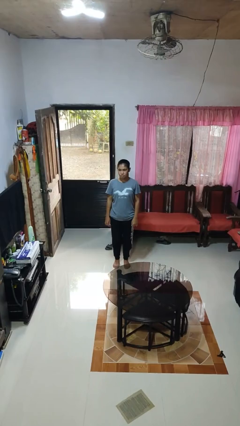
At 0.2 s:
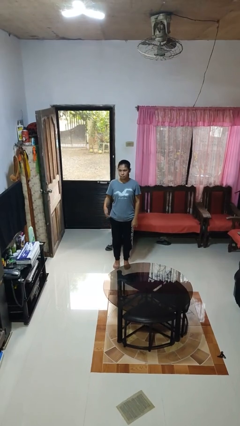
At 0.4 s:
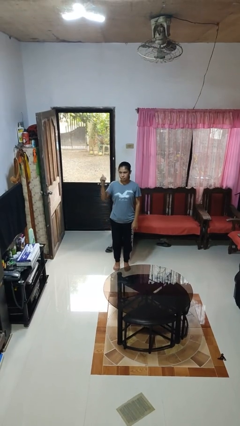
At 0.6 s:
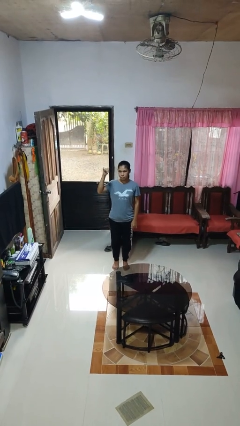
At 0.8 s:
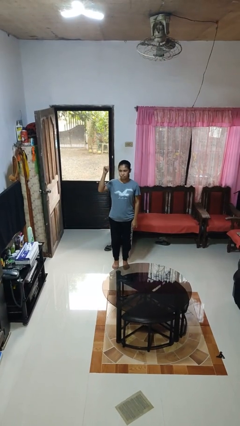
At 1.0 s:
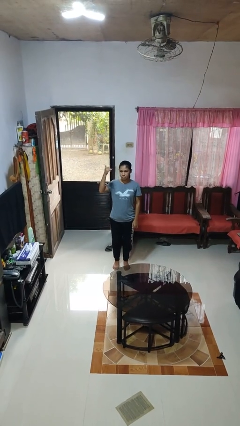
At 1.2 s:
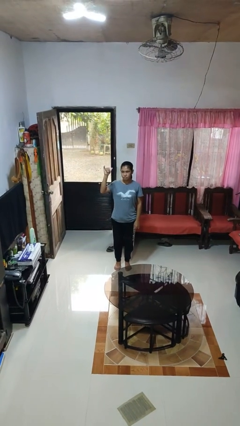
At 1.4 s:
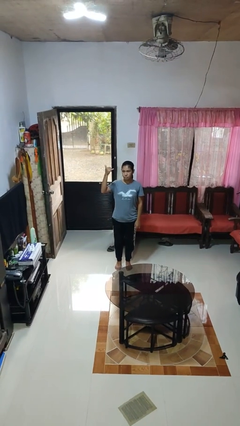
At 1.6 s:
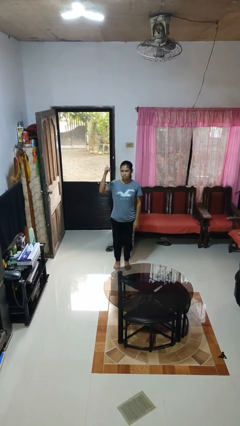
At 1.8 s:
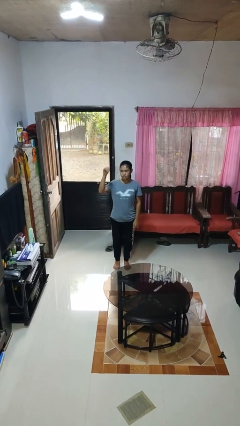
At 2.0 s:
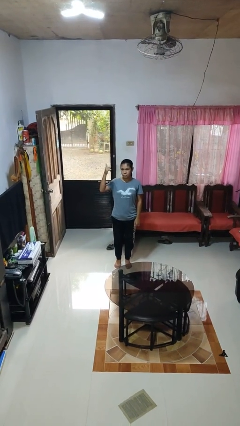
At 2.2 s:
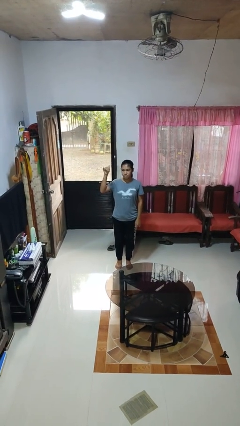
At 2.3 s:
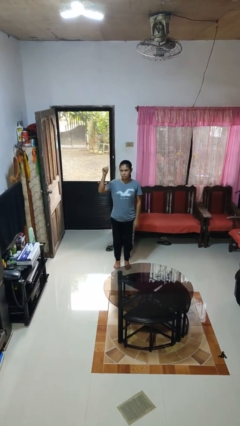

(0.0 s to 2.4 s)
person gestures hang loose

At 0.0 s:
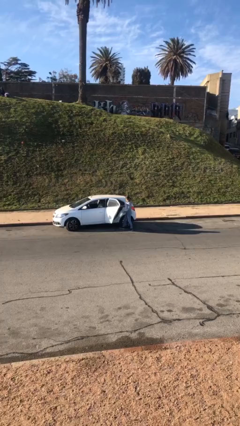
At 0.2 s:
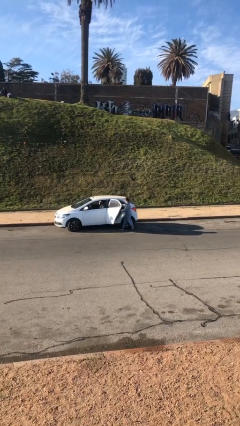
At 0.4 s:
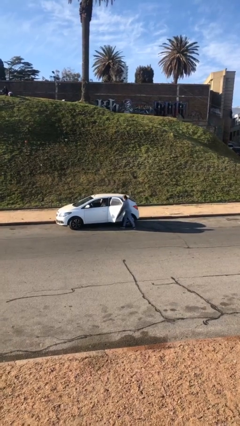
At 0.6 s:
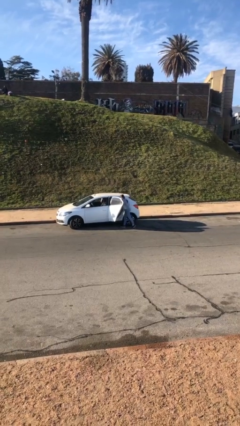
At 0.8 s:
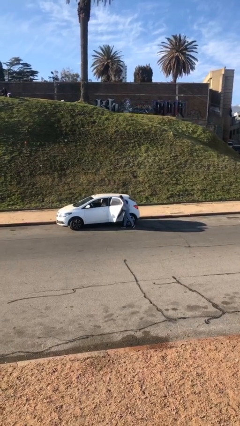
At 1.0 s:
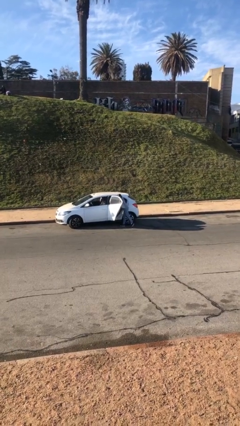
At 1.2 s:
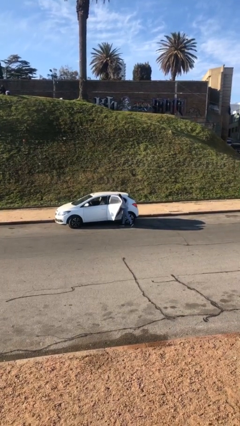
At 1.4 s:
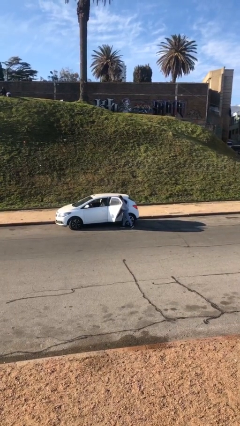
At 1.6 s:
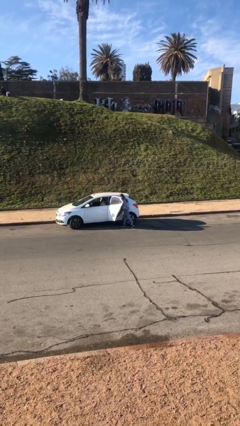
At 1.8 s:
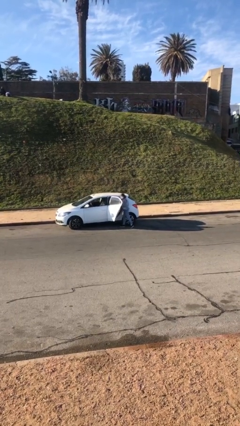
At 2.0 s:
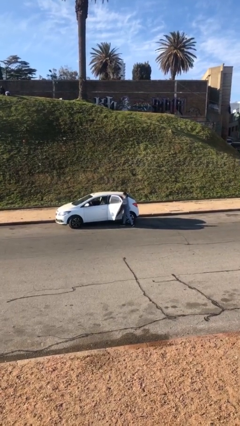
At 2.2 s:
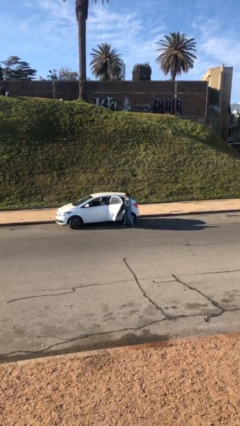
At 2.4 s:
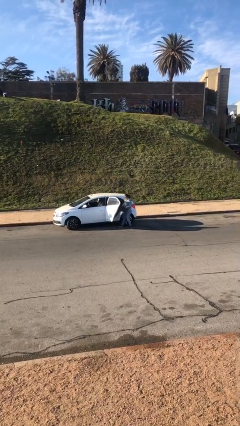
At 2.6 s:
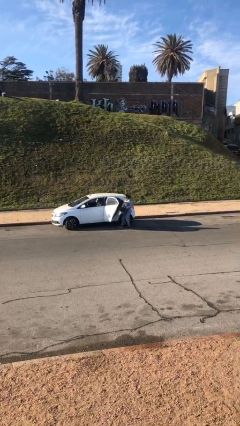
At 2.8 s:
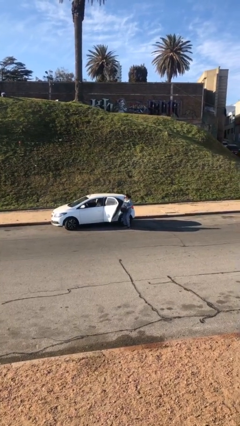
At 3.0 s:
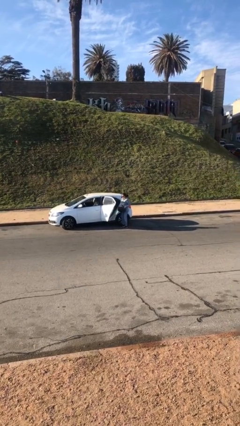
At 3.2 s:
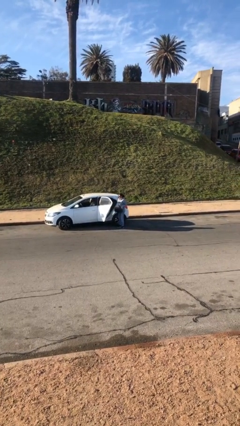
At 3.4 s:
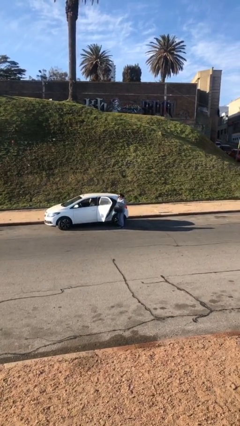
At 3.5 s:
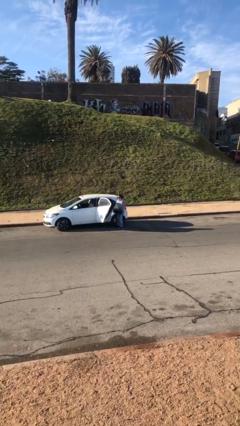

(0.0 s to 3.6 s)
person unloads car

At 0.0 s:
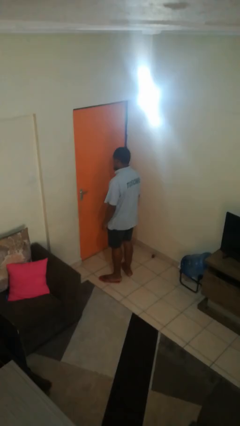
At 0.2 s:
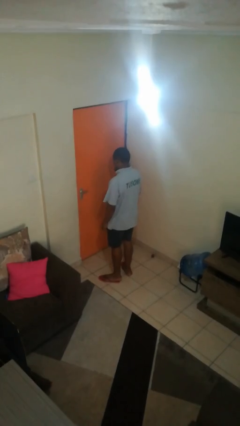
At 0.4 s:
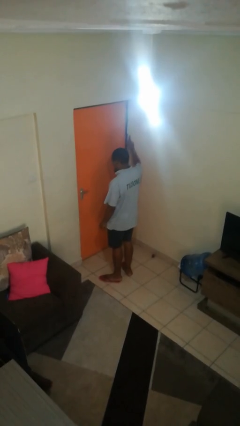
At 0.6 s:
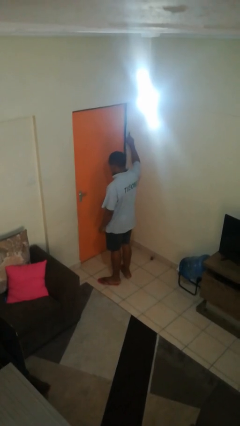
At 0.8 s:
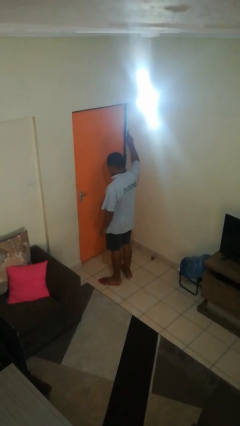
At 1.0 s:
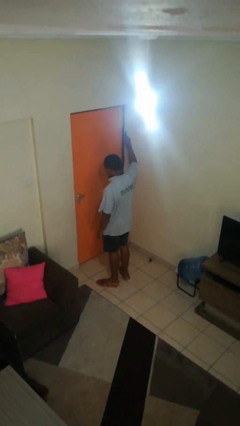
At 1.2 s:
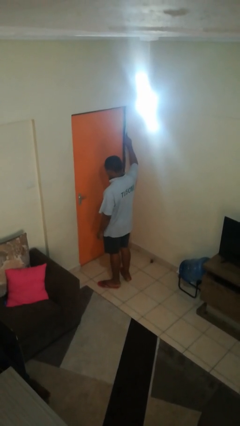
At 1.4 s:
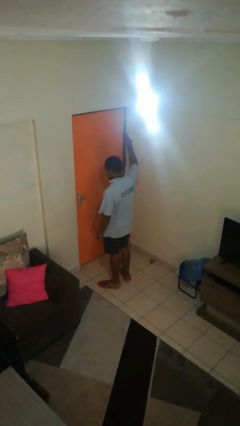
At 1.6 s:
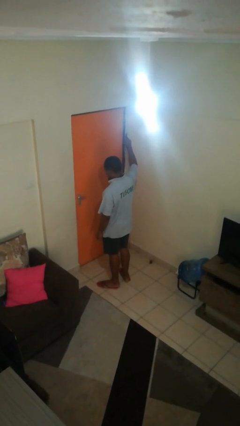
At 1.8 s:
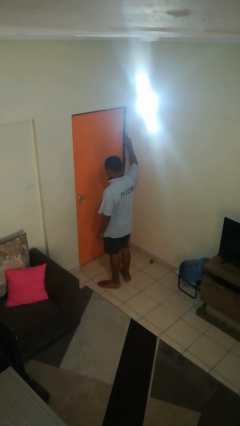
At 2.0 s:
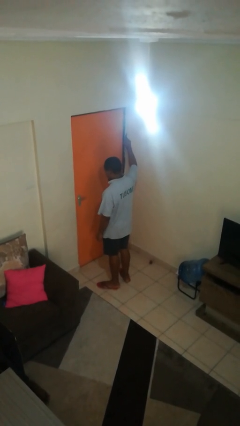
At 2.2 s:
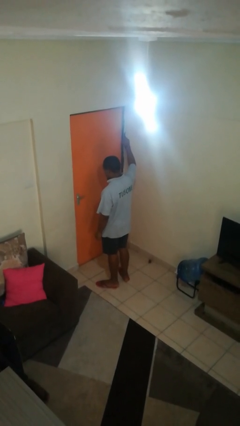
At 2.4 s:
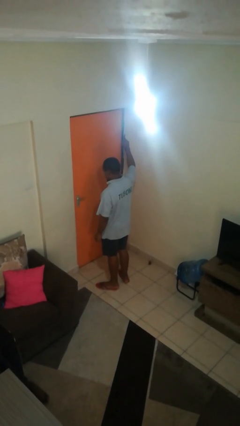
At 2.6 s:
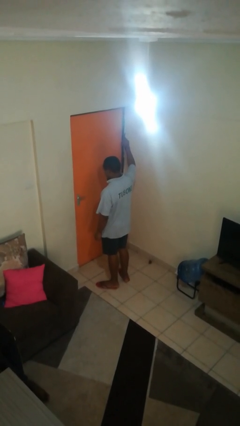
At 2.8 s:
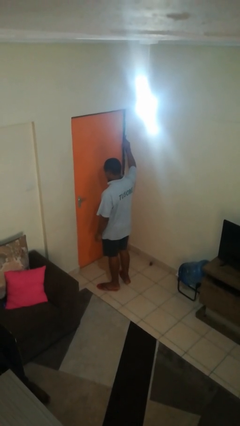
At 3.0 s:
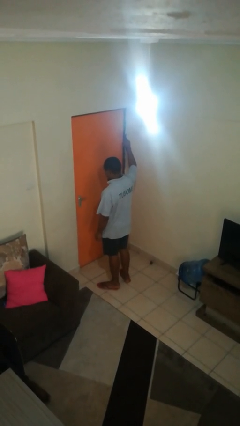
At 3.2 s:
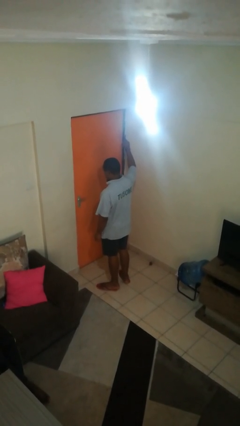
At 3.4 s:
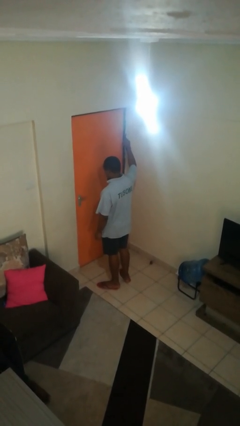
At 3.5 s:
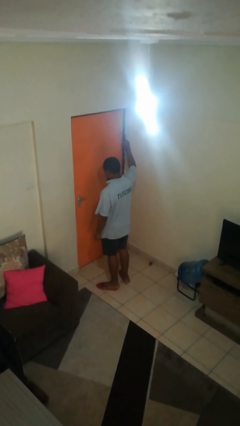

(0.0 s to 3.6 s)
person gestures number one

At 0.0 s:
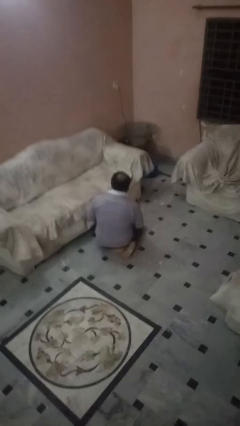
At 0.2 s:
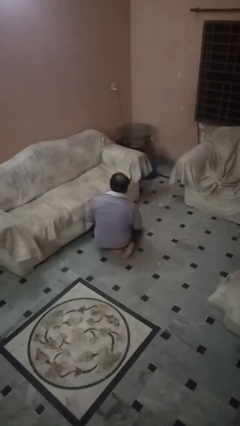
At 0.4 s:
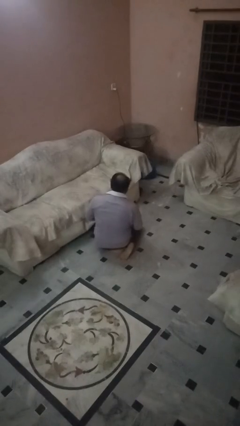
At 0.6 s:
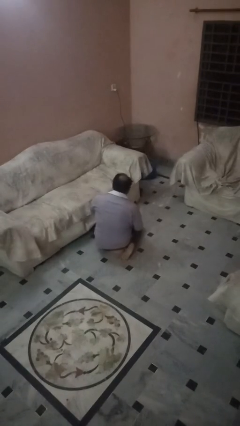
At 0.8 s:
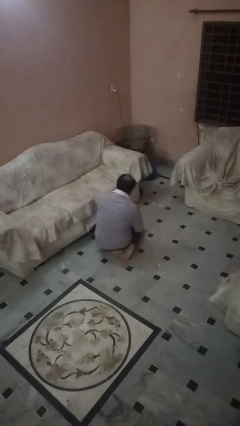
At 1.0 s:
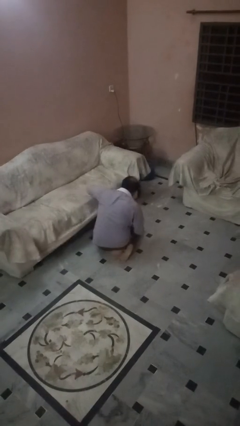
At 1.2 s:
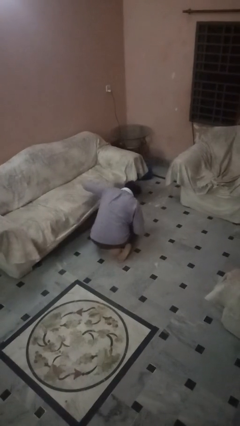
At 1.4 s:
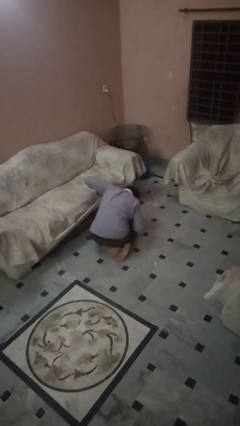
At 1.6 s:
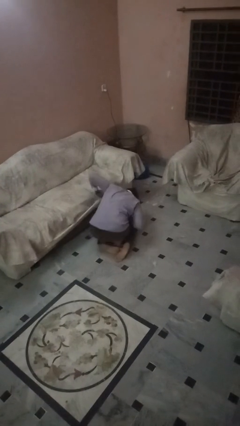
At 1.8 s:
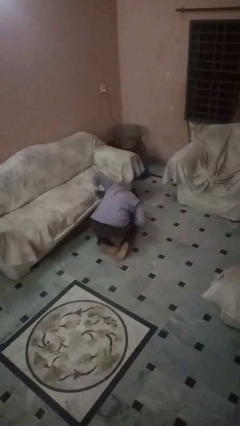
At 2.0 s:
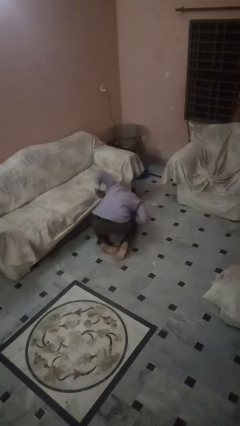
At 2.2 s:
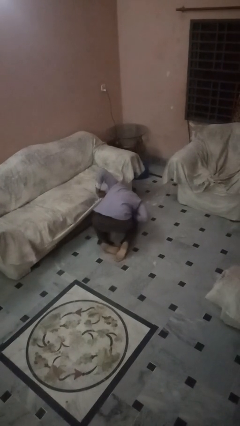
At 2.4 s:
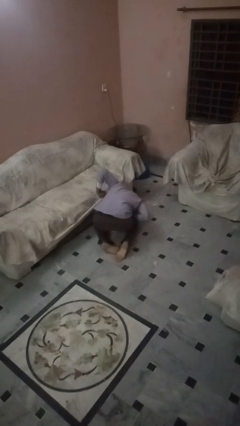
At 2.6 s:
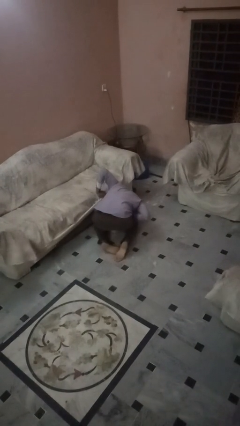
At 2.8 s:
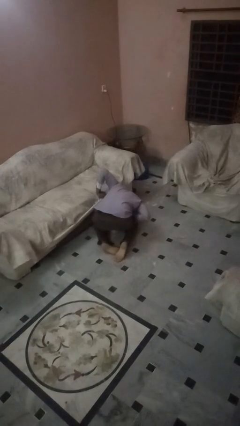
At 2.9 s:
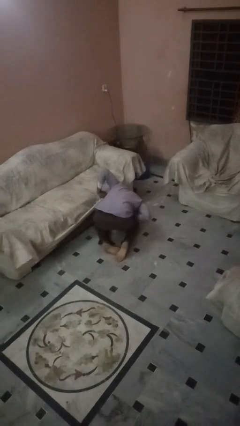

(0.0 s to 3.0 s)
person searches under couch

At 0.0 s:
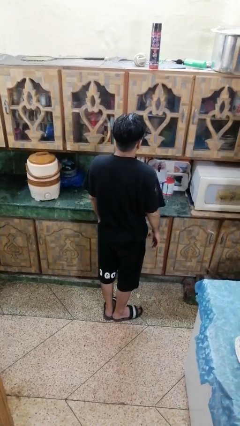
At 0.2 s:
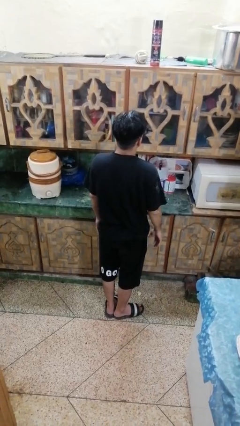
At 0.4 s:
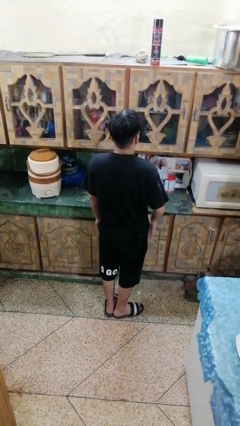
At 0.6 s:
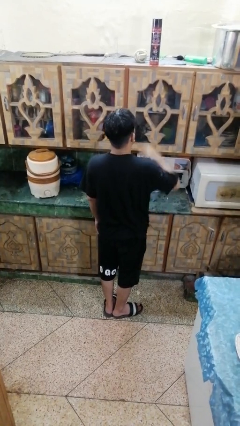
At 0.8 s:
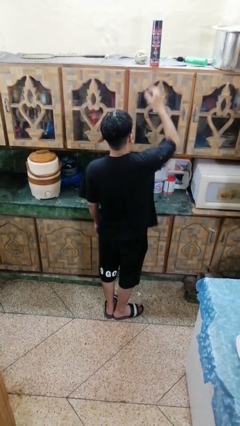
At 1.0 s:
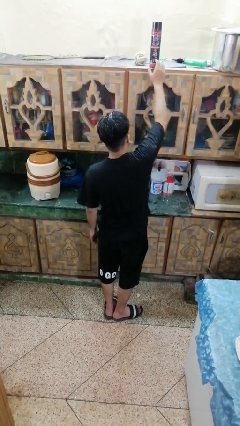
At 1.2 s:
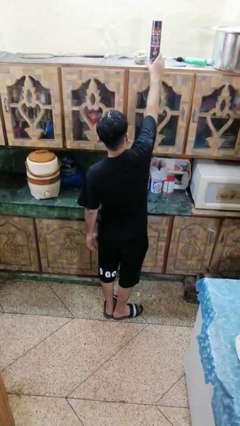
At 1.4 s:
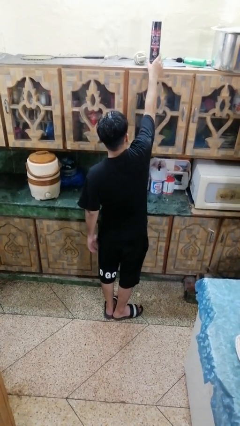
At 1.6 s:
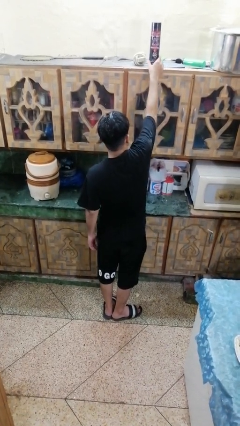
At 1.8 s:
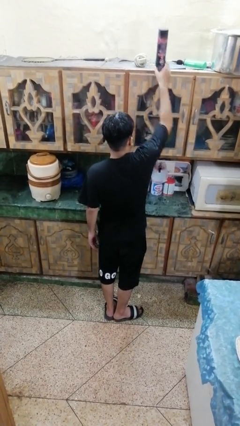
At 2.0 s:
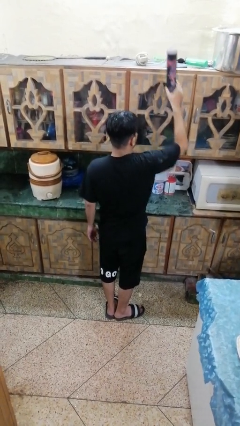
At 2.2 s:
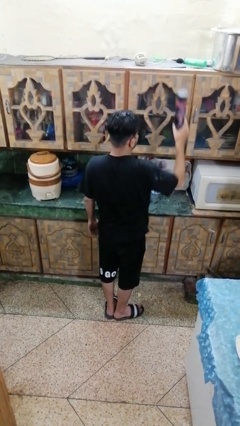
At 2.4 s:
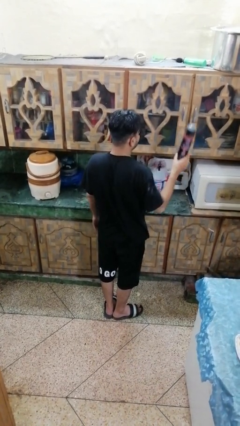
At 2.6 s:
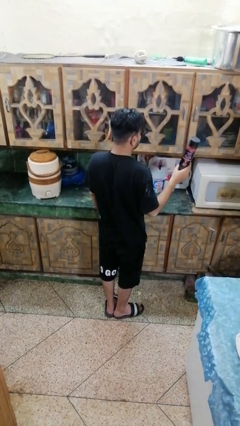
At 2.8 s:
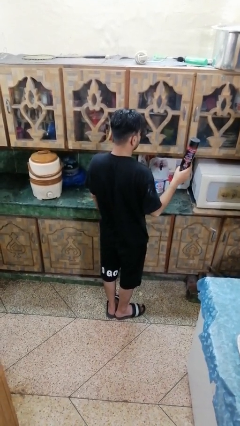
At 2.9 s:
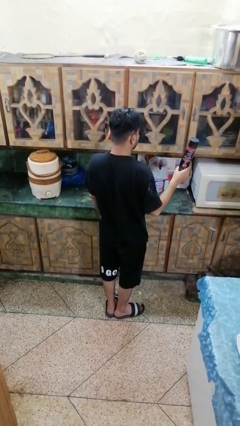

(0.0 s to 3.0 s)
person picks up object from countertop

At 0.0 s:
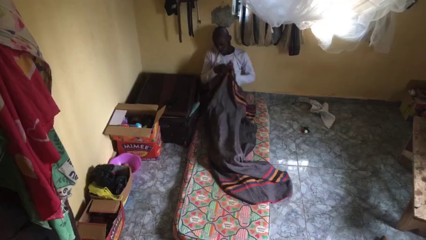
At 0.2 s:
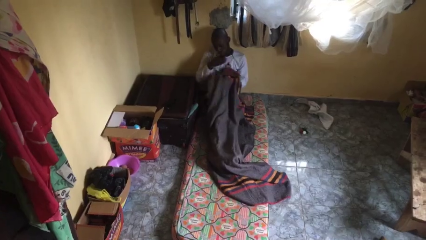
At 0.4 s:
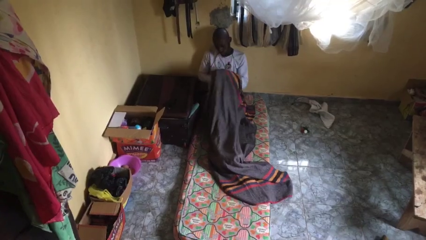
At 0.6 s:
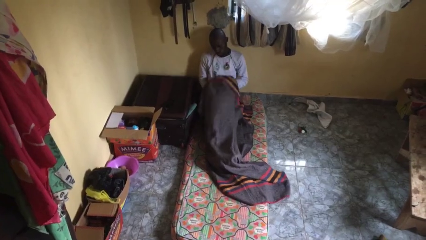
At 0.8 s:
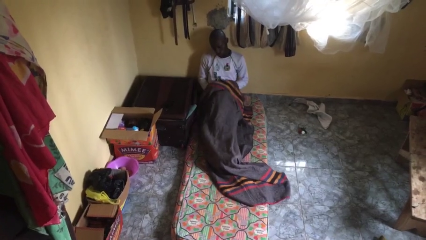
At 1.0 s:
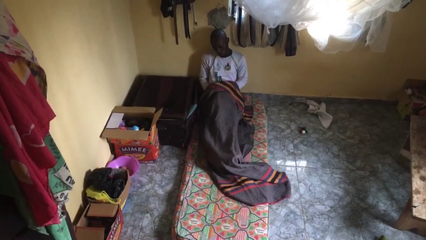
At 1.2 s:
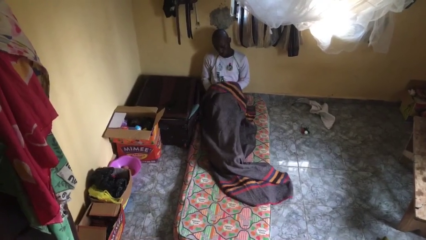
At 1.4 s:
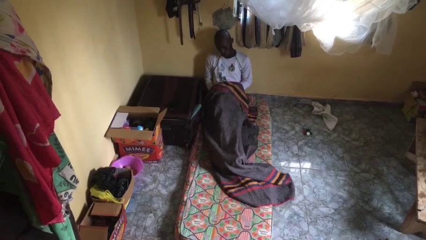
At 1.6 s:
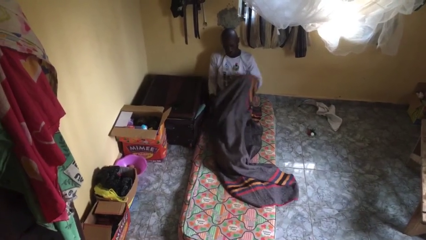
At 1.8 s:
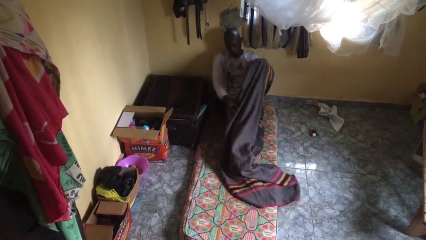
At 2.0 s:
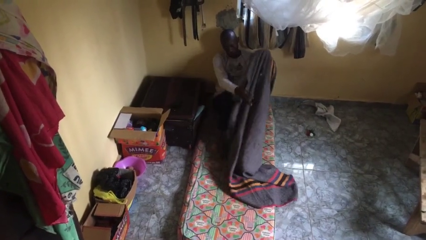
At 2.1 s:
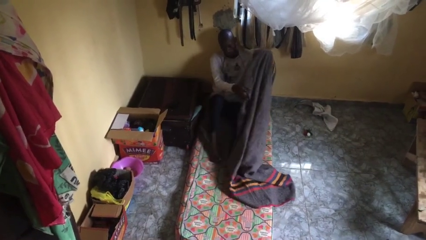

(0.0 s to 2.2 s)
person uncovers with blanket
